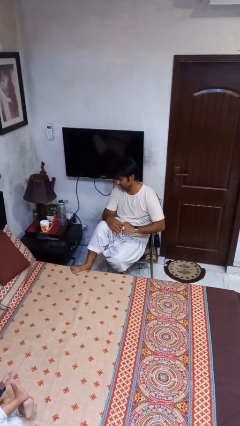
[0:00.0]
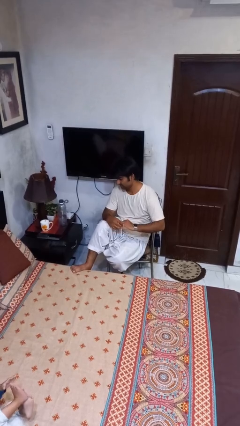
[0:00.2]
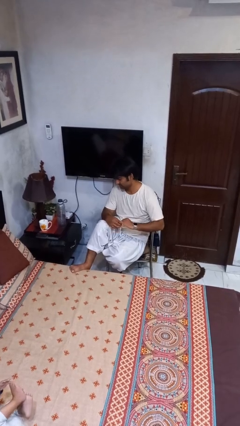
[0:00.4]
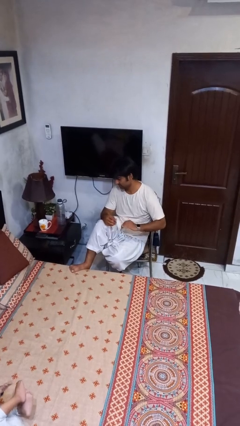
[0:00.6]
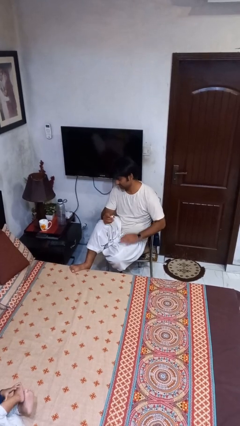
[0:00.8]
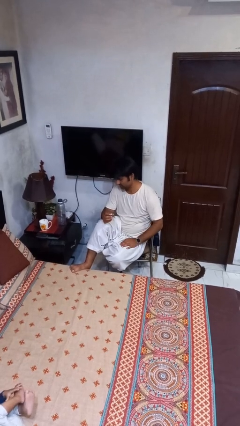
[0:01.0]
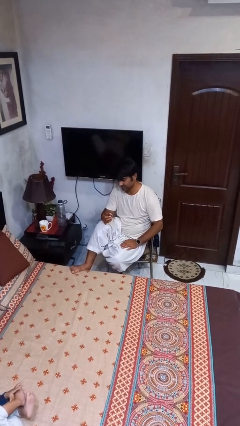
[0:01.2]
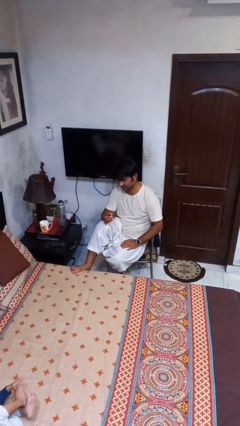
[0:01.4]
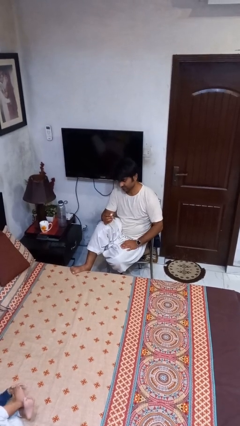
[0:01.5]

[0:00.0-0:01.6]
person takes off ring

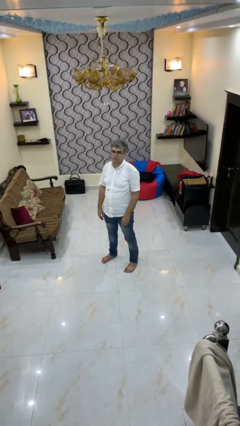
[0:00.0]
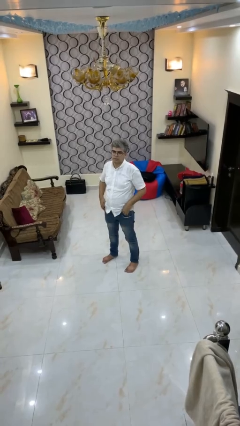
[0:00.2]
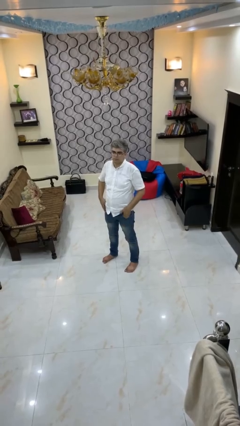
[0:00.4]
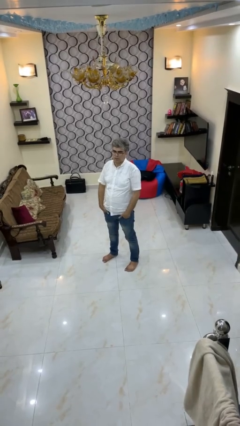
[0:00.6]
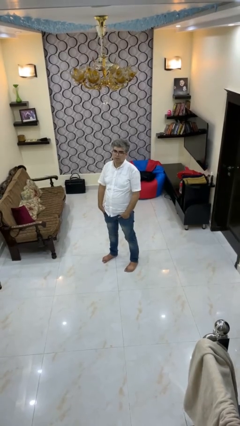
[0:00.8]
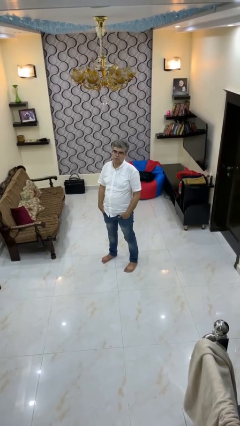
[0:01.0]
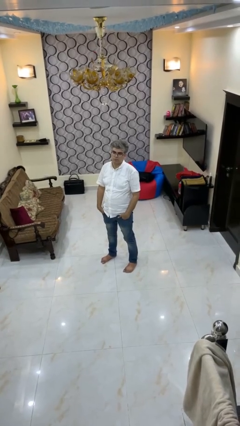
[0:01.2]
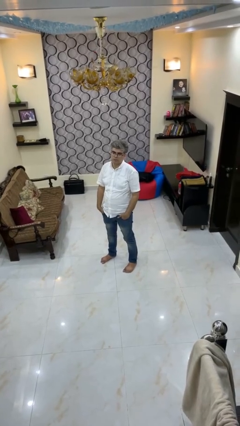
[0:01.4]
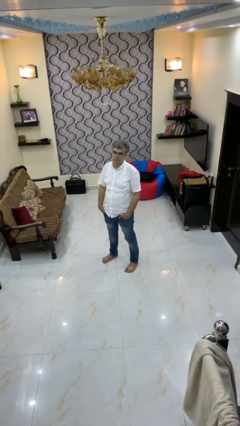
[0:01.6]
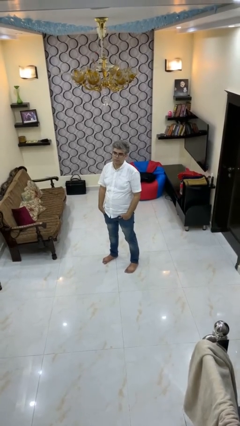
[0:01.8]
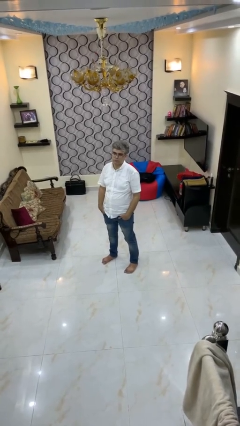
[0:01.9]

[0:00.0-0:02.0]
person puts hands in back pockets

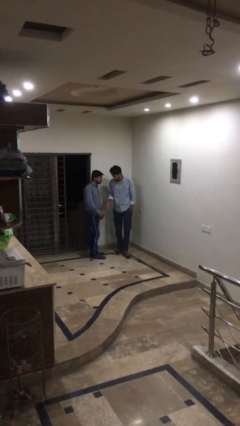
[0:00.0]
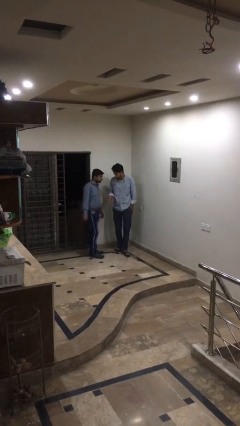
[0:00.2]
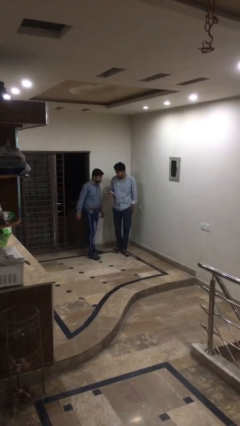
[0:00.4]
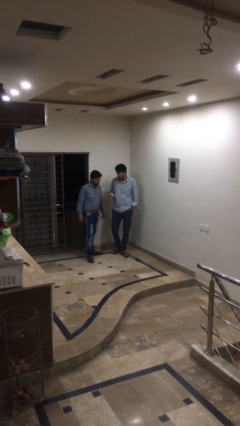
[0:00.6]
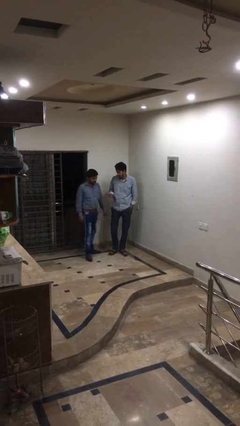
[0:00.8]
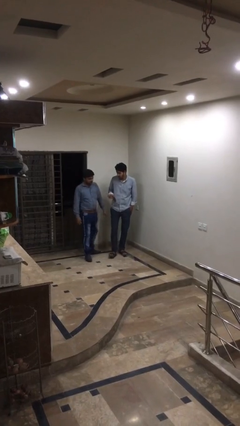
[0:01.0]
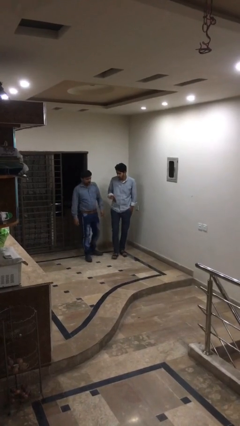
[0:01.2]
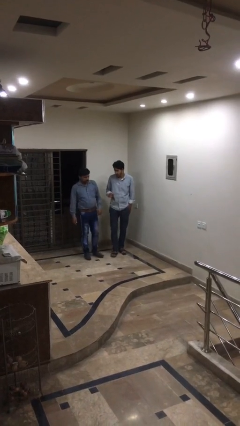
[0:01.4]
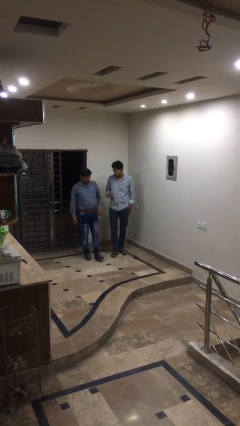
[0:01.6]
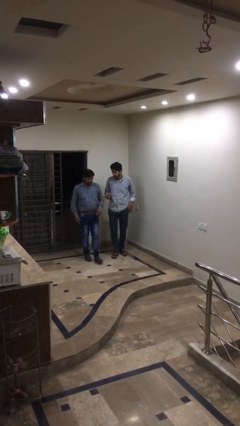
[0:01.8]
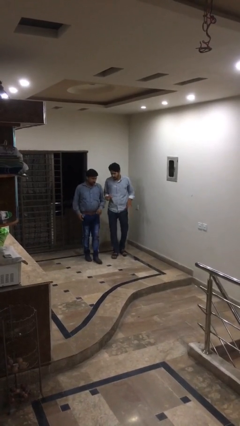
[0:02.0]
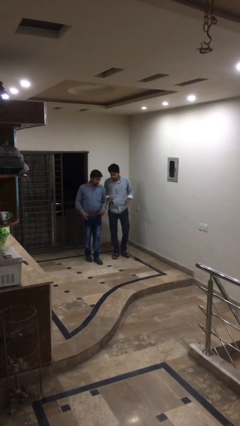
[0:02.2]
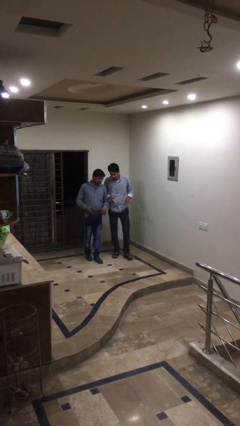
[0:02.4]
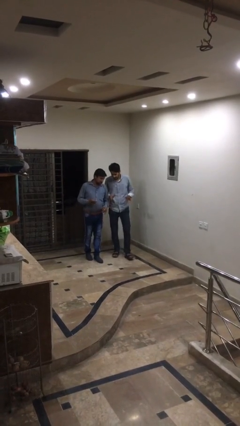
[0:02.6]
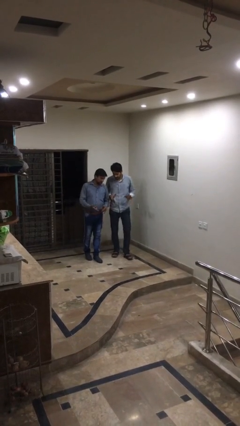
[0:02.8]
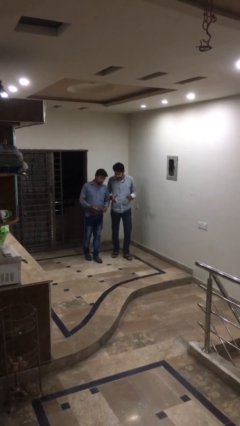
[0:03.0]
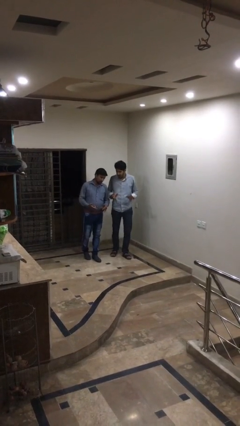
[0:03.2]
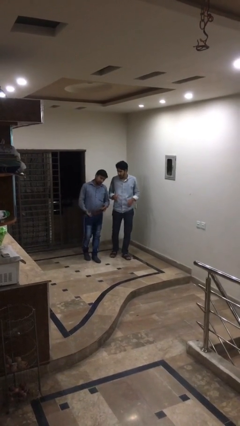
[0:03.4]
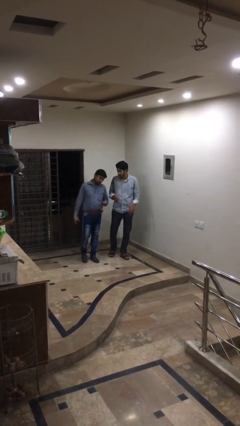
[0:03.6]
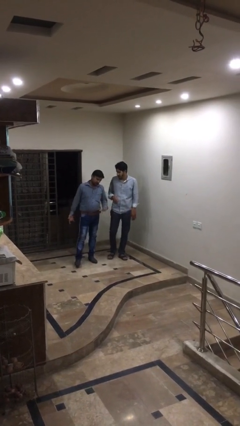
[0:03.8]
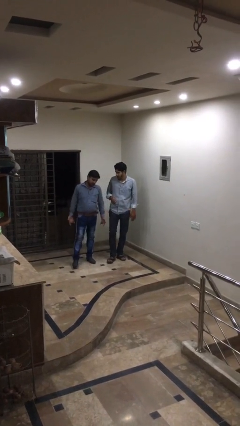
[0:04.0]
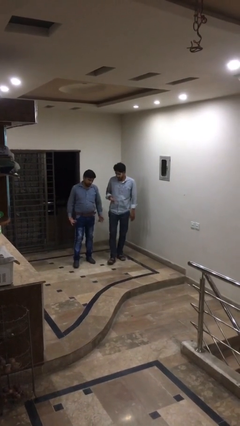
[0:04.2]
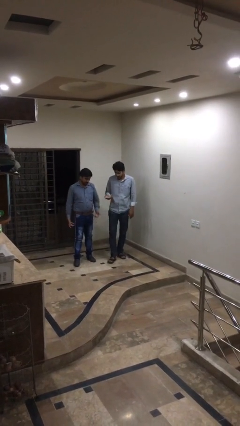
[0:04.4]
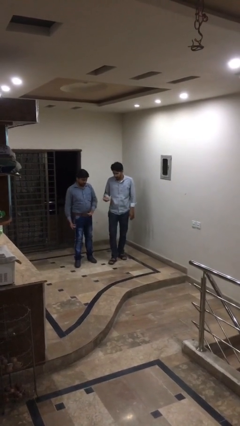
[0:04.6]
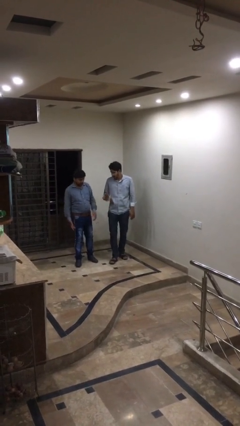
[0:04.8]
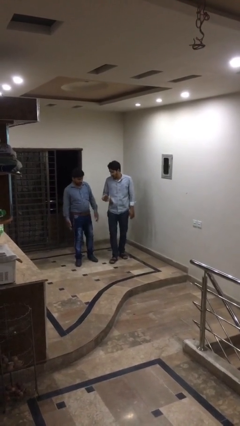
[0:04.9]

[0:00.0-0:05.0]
person talks to person

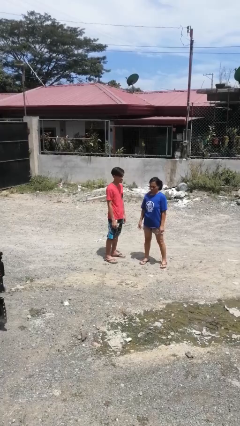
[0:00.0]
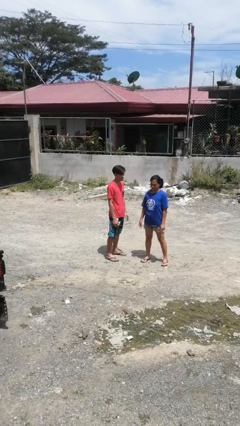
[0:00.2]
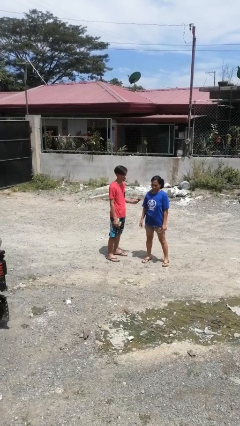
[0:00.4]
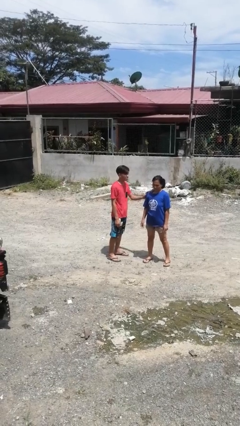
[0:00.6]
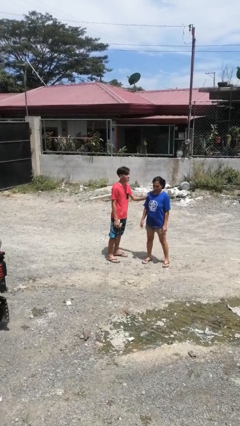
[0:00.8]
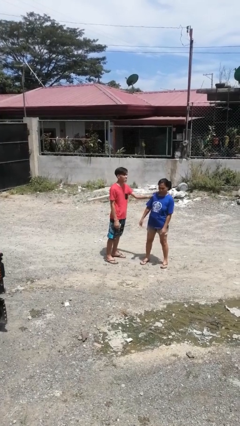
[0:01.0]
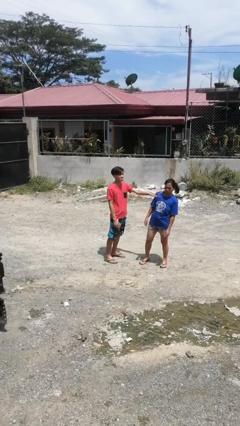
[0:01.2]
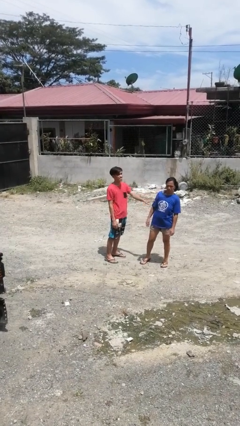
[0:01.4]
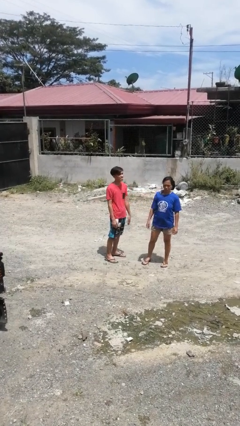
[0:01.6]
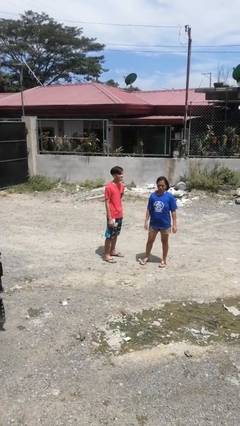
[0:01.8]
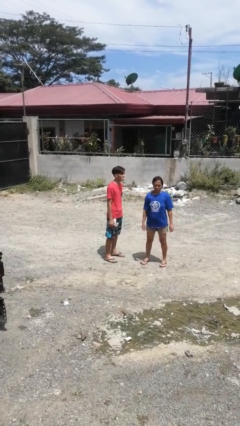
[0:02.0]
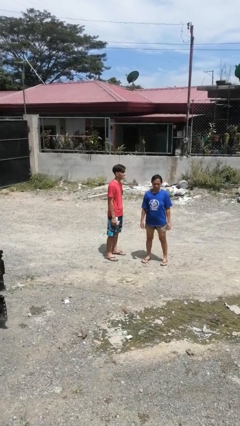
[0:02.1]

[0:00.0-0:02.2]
person shoves person

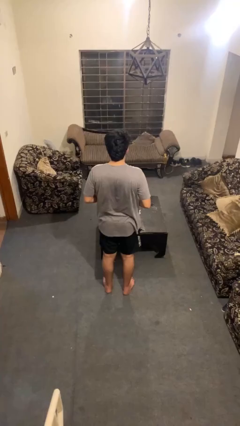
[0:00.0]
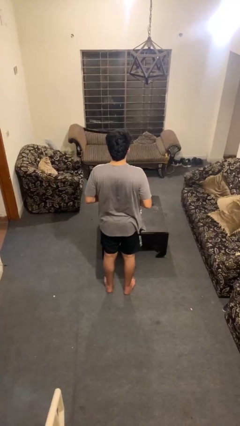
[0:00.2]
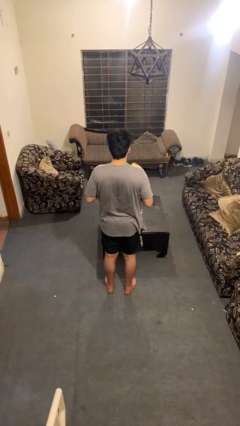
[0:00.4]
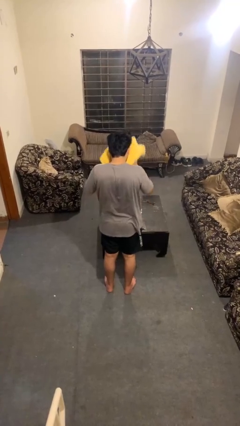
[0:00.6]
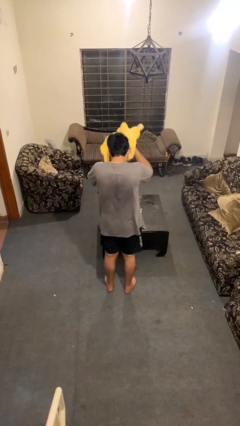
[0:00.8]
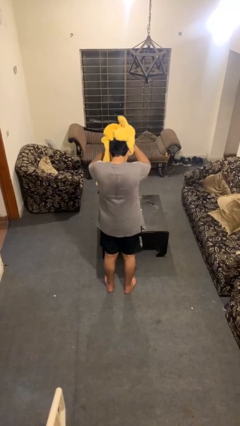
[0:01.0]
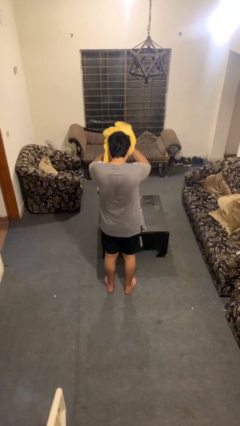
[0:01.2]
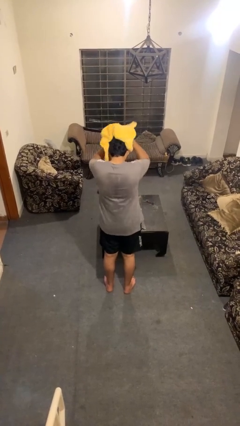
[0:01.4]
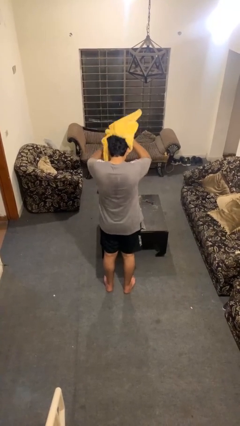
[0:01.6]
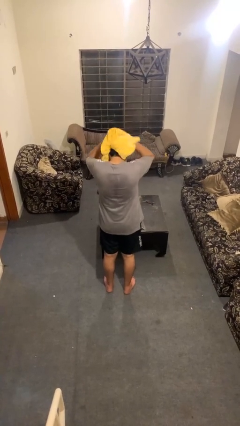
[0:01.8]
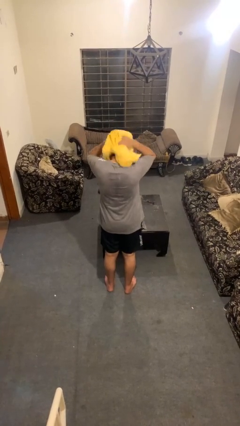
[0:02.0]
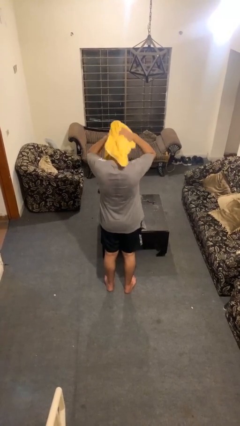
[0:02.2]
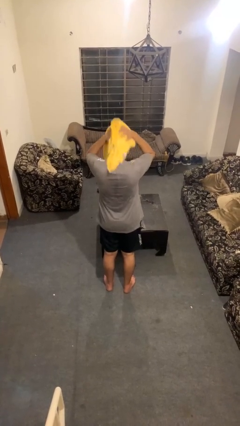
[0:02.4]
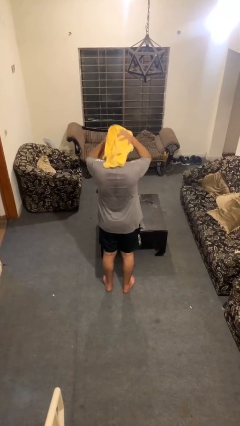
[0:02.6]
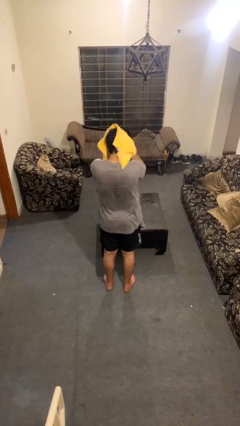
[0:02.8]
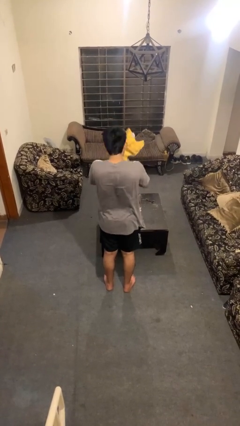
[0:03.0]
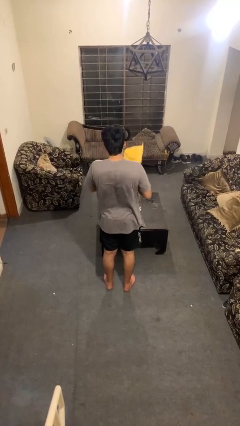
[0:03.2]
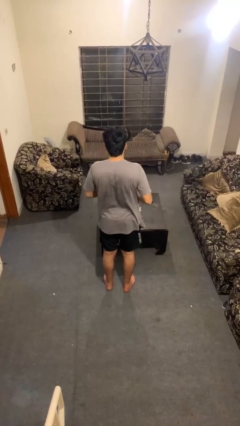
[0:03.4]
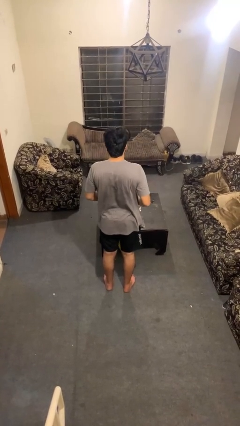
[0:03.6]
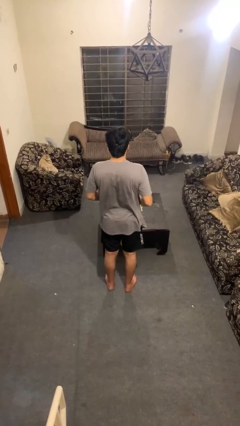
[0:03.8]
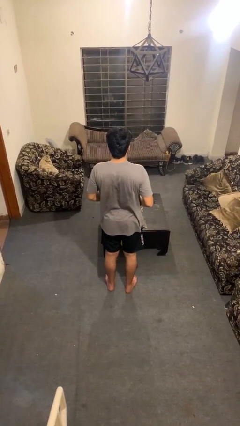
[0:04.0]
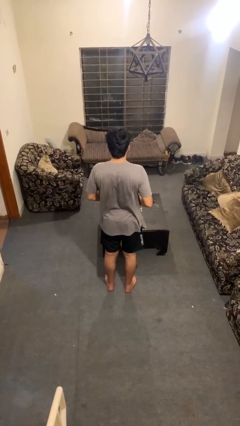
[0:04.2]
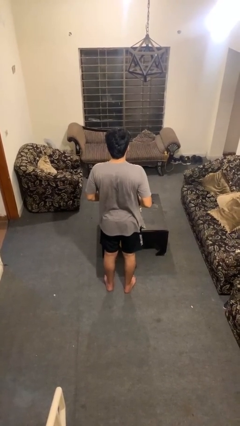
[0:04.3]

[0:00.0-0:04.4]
person dries hair with towel

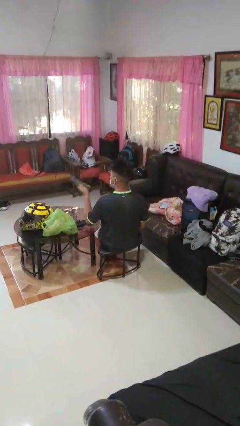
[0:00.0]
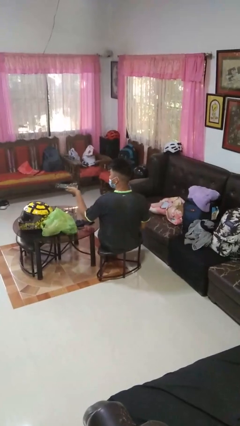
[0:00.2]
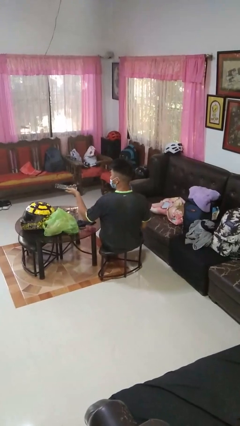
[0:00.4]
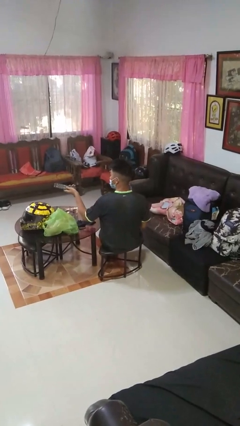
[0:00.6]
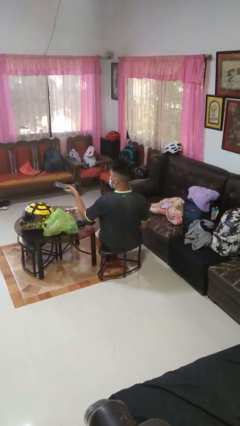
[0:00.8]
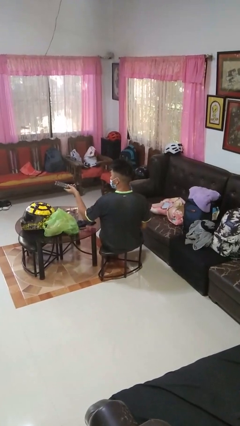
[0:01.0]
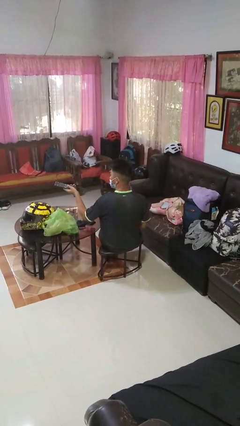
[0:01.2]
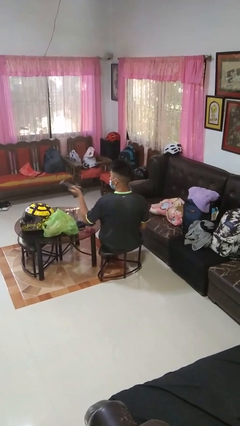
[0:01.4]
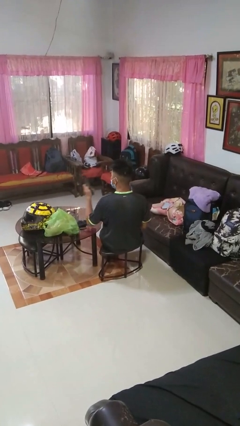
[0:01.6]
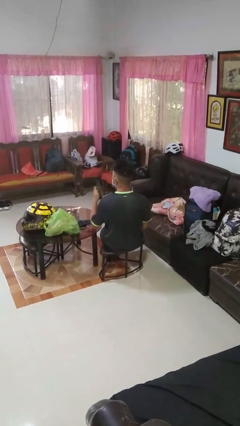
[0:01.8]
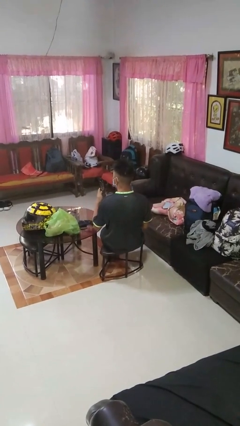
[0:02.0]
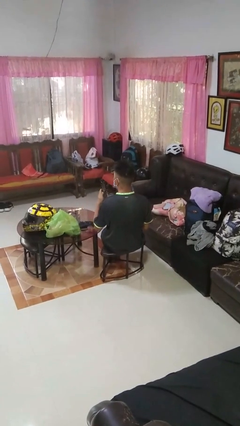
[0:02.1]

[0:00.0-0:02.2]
person uses television remote

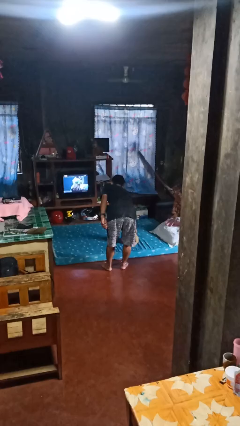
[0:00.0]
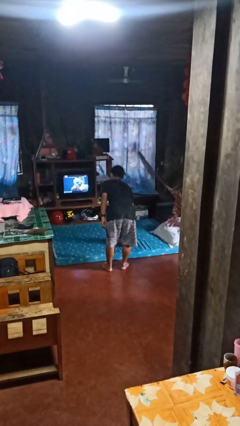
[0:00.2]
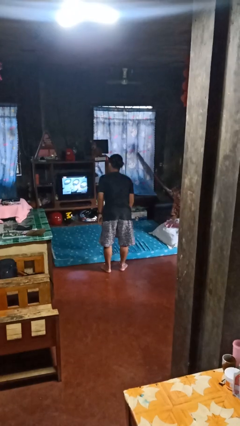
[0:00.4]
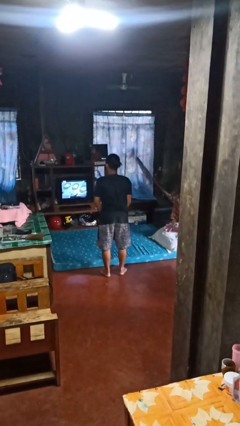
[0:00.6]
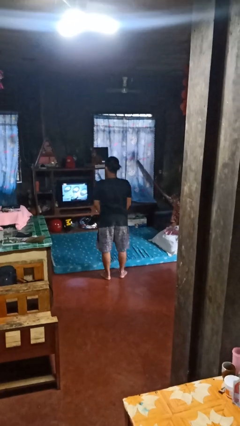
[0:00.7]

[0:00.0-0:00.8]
person picks up object from bed
